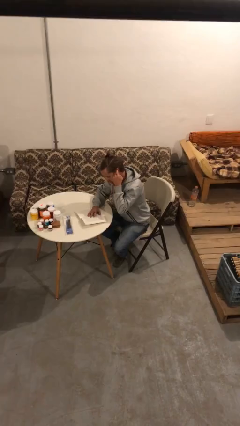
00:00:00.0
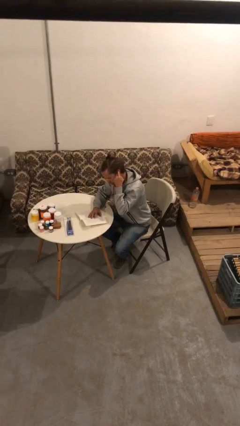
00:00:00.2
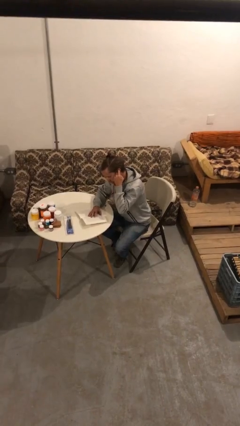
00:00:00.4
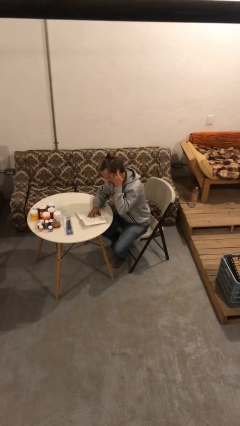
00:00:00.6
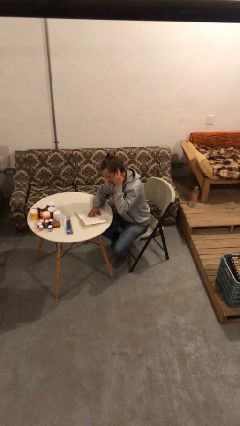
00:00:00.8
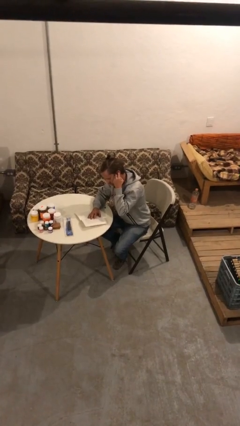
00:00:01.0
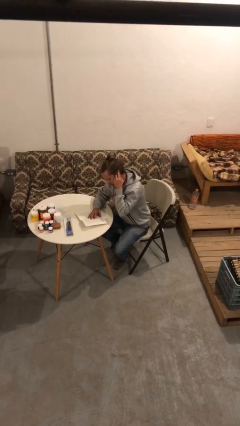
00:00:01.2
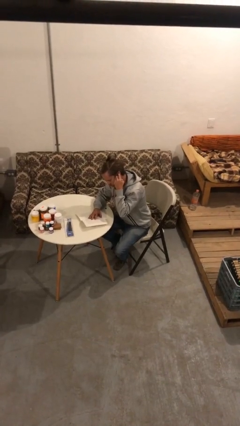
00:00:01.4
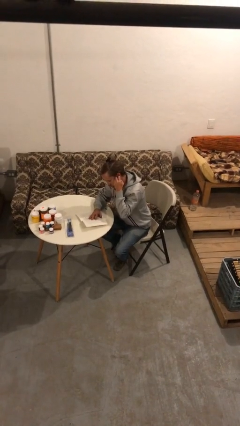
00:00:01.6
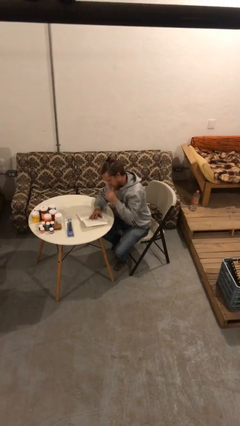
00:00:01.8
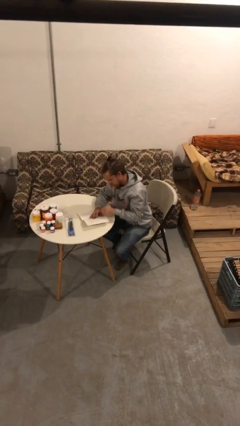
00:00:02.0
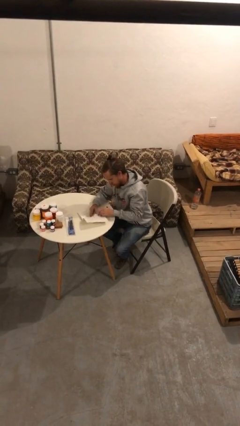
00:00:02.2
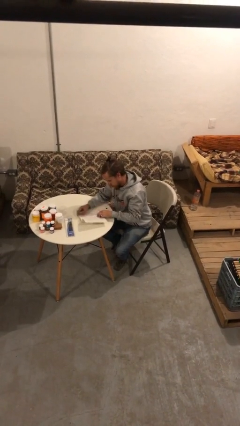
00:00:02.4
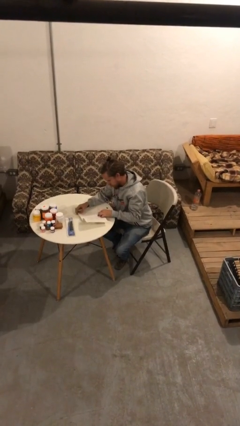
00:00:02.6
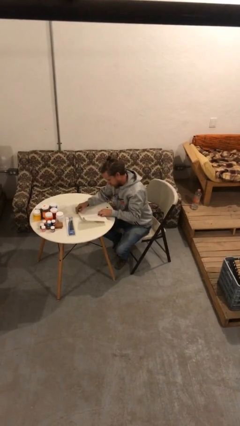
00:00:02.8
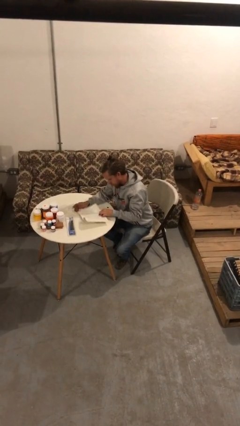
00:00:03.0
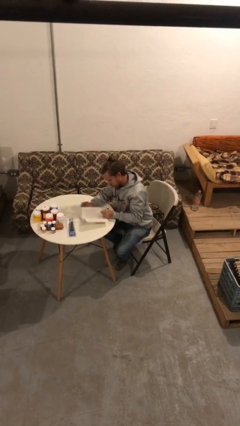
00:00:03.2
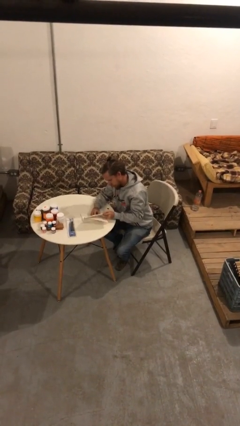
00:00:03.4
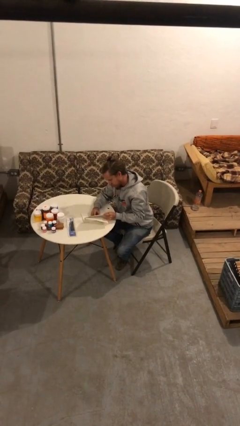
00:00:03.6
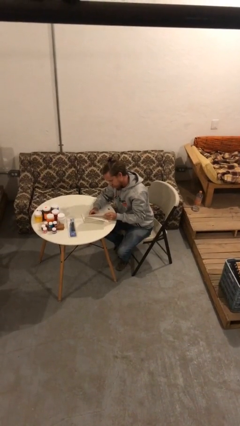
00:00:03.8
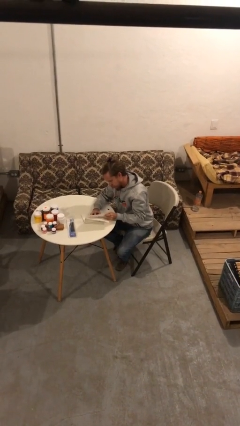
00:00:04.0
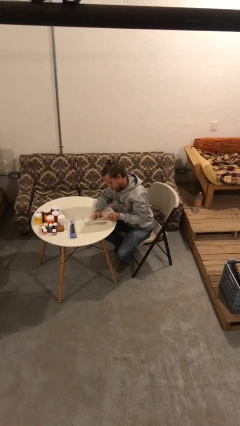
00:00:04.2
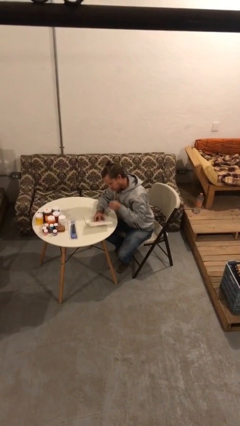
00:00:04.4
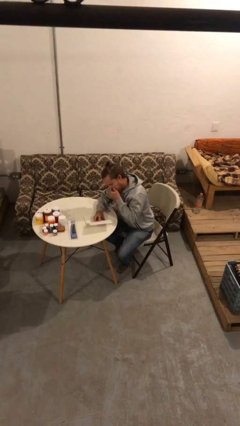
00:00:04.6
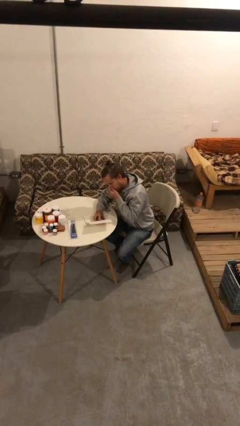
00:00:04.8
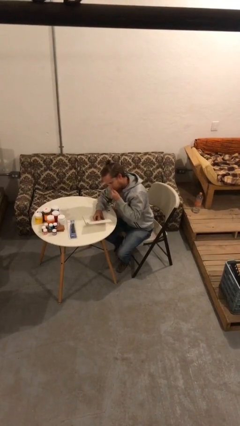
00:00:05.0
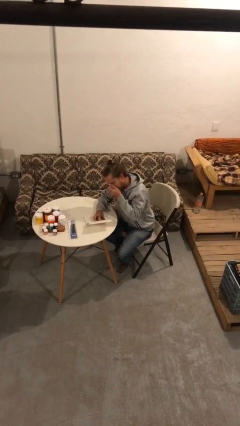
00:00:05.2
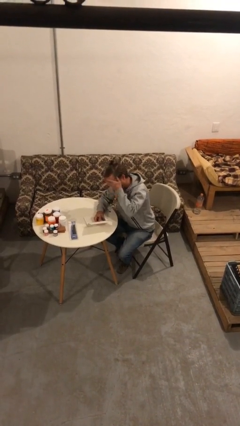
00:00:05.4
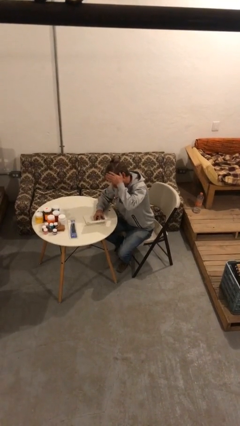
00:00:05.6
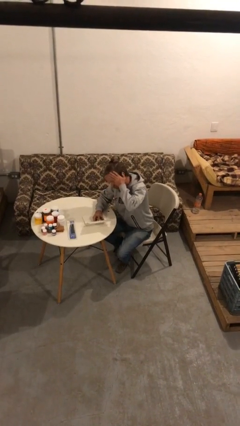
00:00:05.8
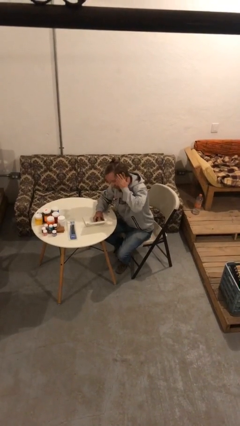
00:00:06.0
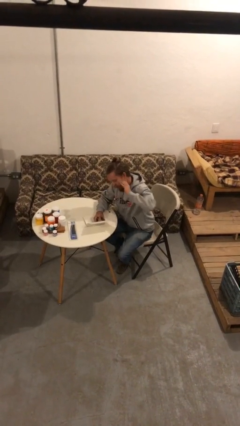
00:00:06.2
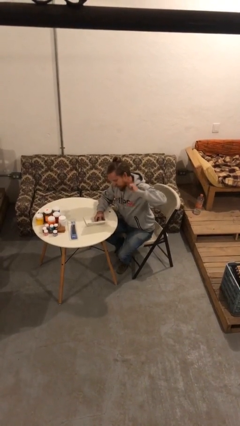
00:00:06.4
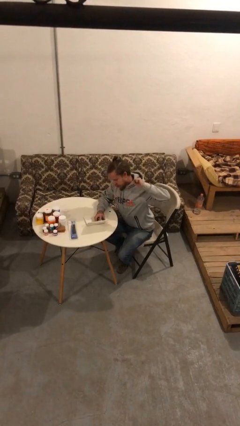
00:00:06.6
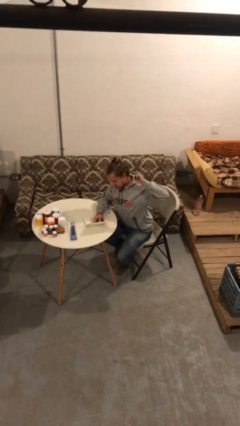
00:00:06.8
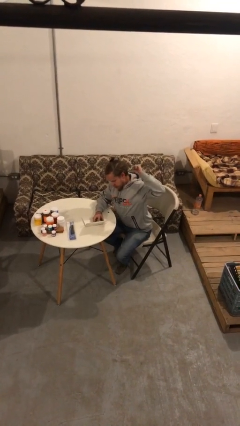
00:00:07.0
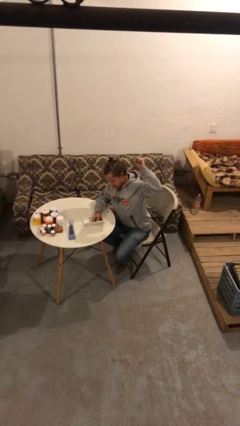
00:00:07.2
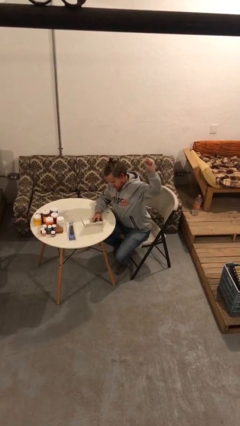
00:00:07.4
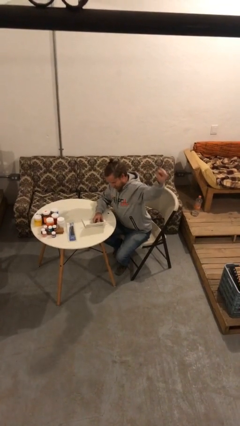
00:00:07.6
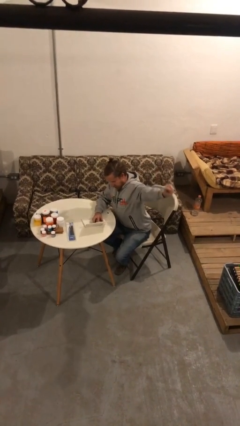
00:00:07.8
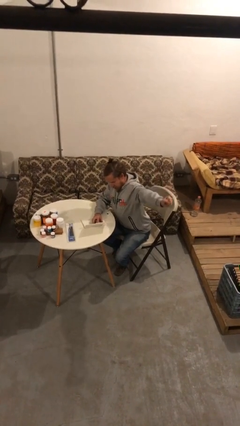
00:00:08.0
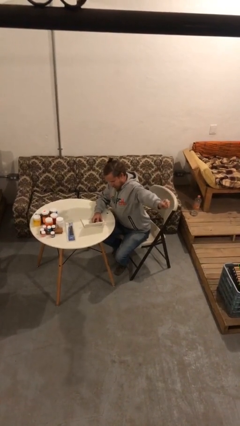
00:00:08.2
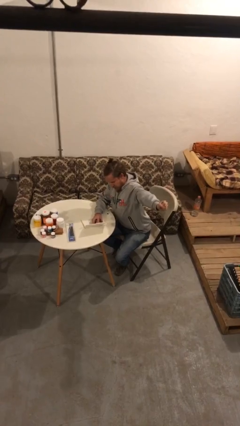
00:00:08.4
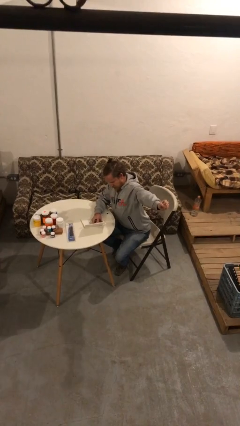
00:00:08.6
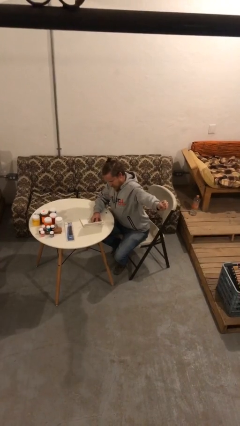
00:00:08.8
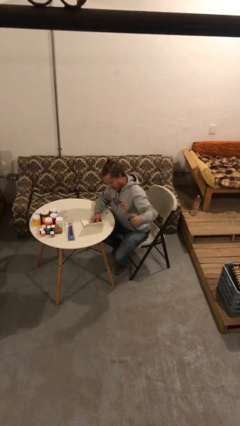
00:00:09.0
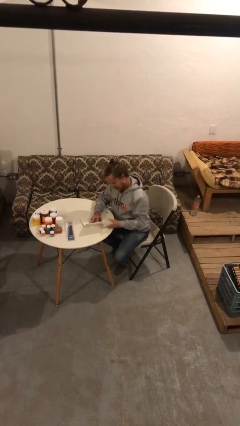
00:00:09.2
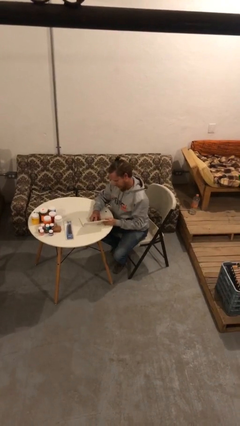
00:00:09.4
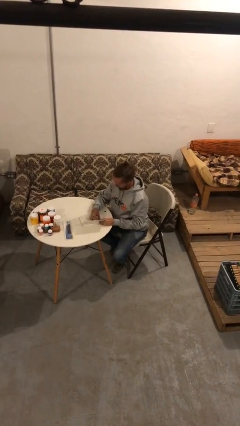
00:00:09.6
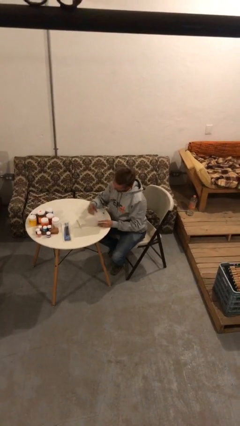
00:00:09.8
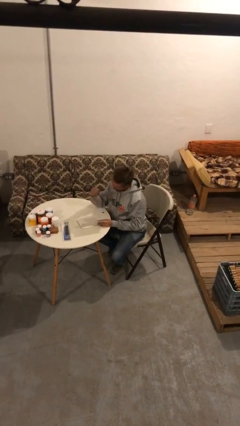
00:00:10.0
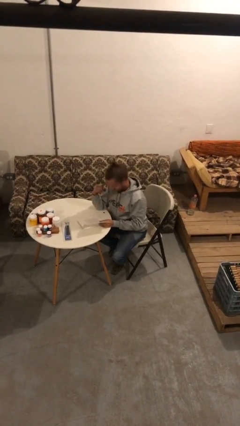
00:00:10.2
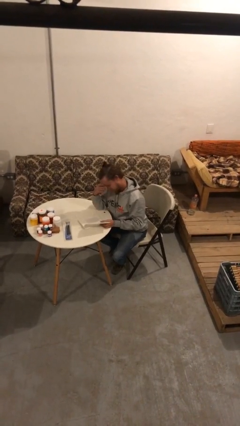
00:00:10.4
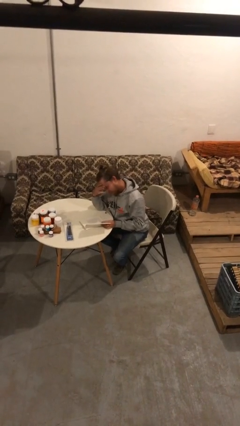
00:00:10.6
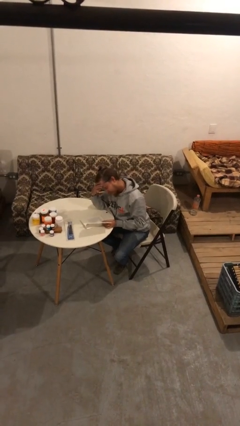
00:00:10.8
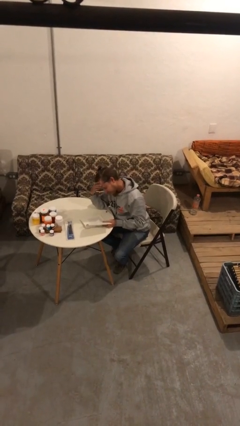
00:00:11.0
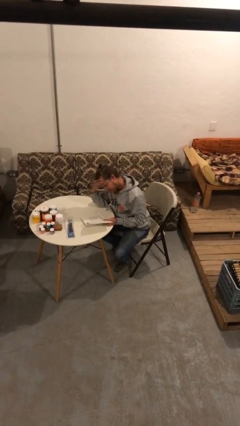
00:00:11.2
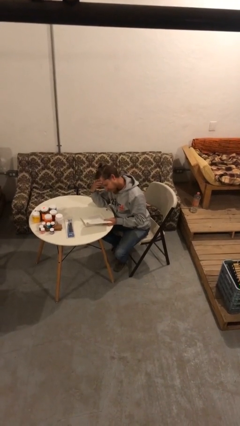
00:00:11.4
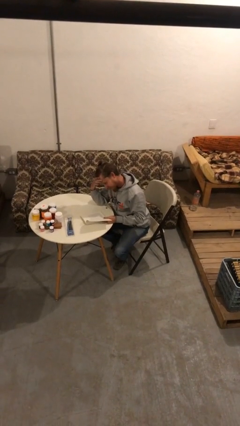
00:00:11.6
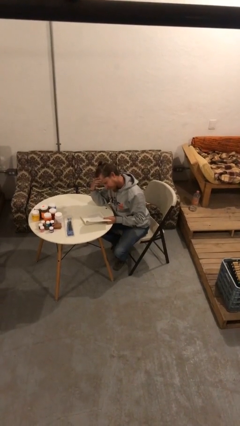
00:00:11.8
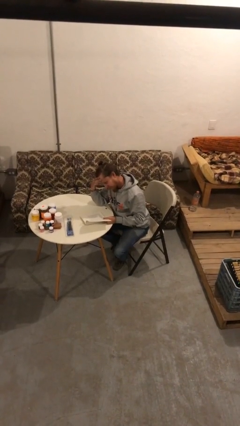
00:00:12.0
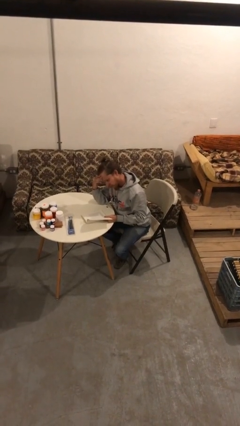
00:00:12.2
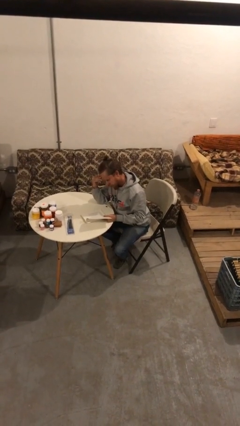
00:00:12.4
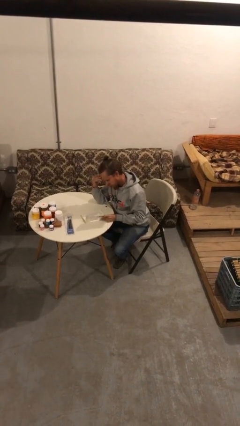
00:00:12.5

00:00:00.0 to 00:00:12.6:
person reads document

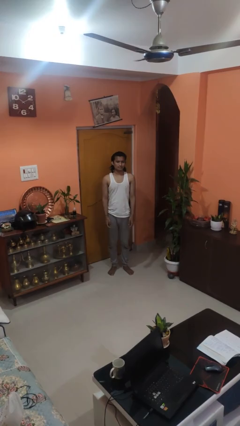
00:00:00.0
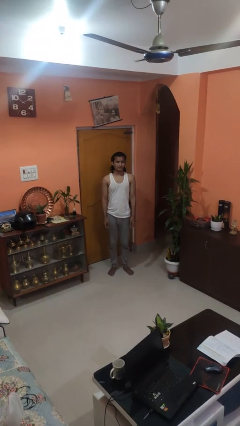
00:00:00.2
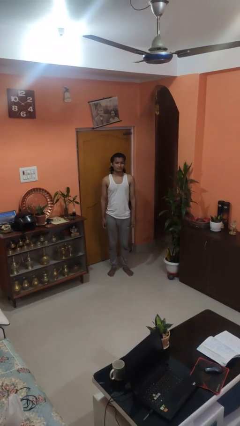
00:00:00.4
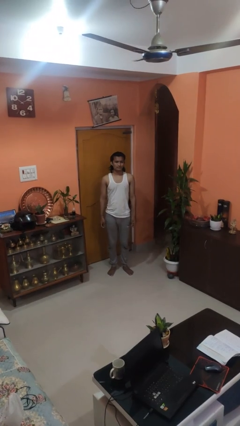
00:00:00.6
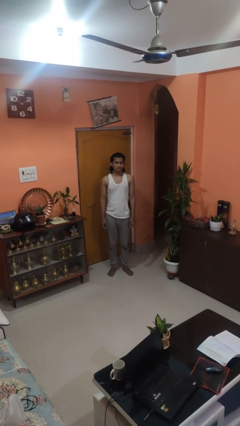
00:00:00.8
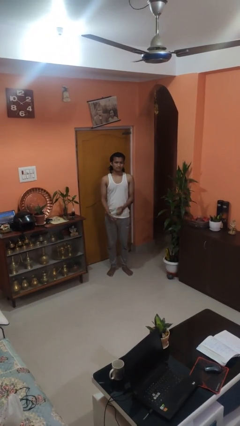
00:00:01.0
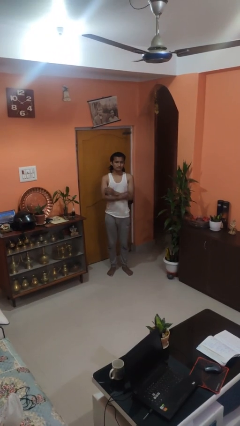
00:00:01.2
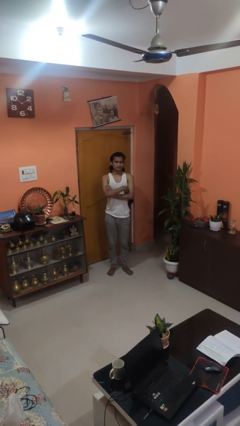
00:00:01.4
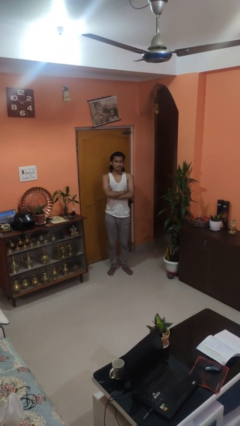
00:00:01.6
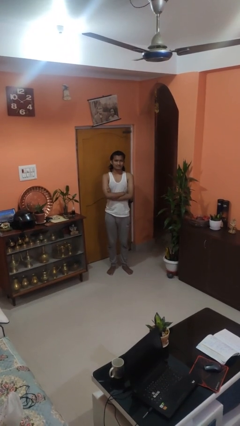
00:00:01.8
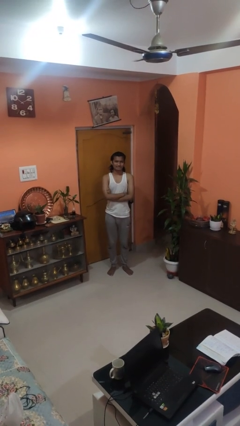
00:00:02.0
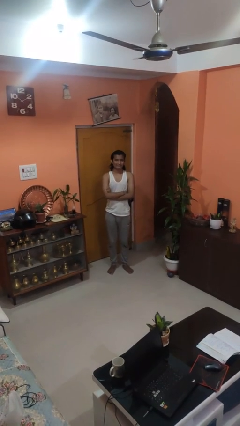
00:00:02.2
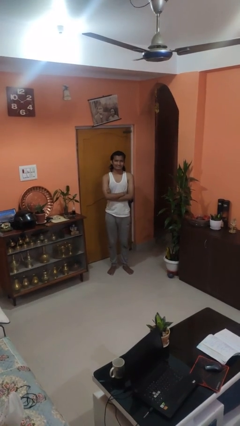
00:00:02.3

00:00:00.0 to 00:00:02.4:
person crosses arms

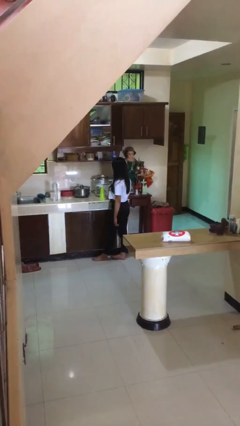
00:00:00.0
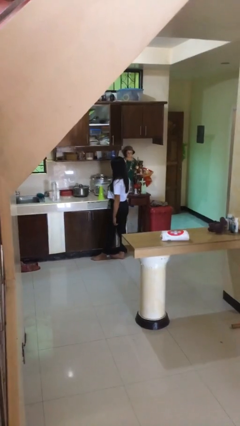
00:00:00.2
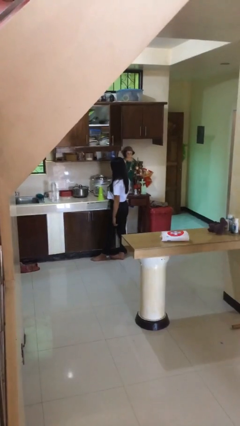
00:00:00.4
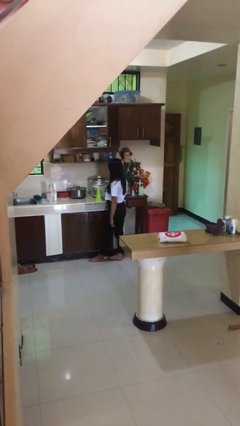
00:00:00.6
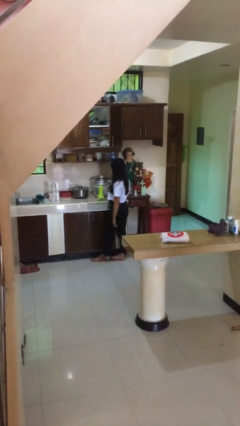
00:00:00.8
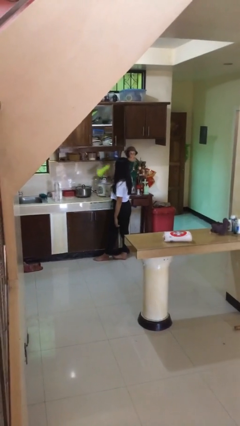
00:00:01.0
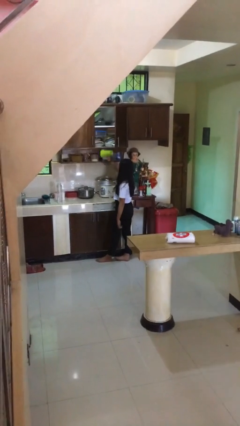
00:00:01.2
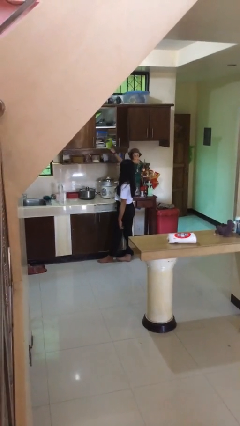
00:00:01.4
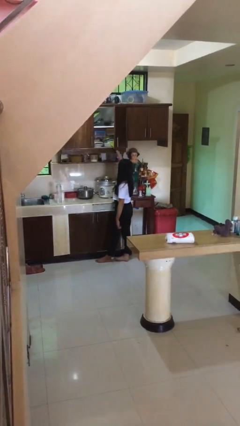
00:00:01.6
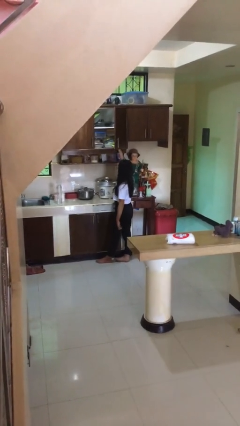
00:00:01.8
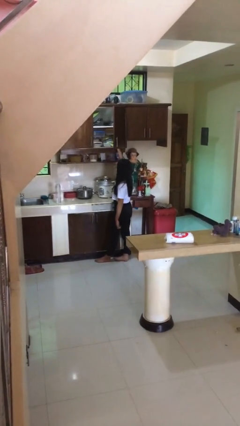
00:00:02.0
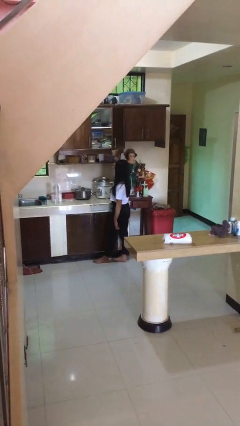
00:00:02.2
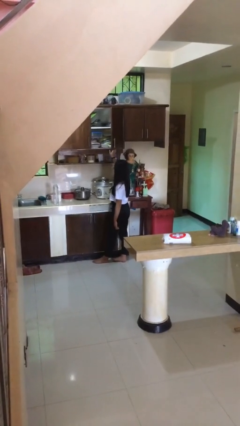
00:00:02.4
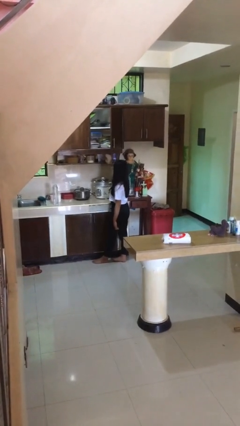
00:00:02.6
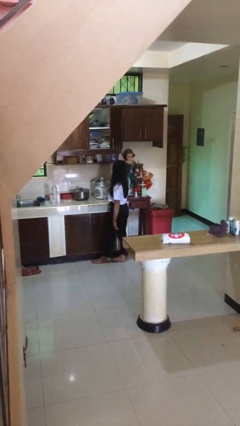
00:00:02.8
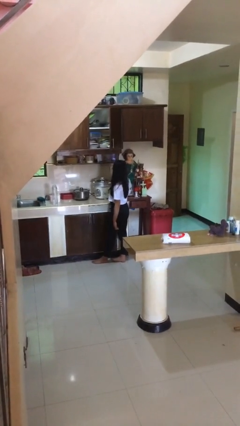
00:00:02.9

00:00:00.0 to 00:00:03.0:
person puts down object into cabinet
